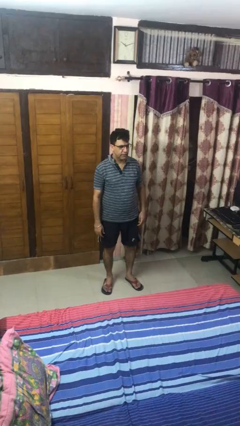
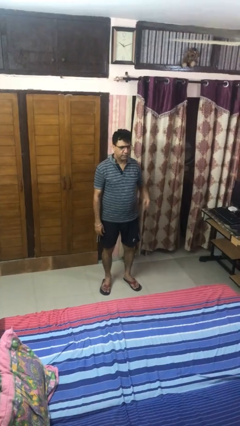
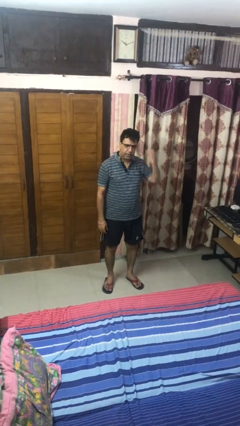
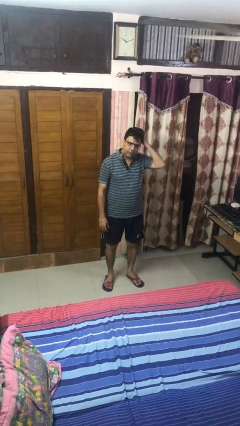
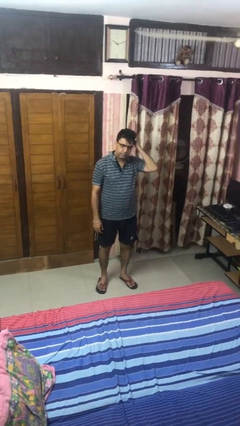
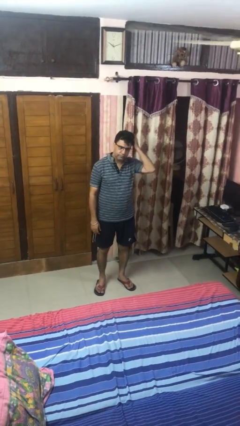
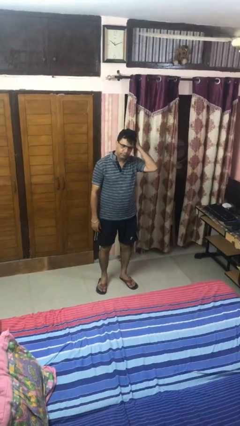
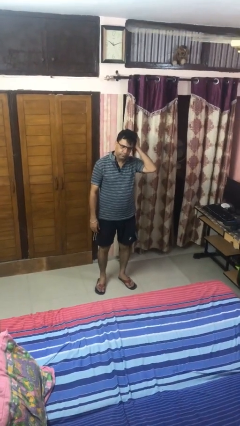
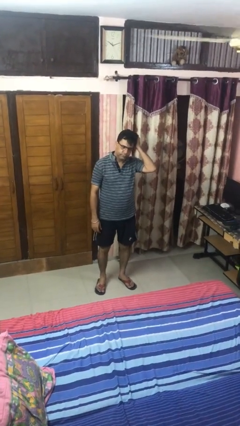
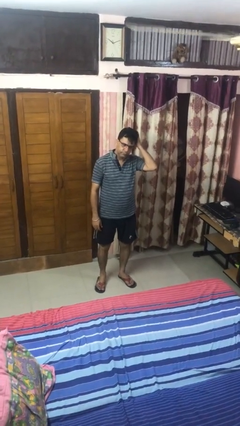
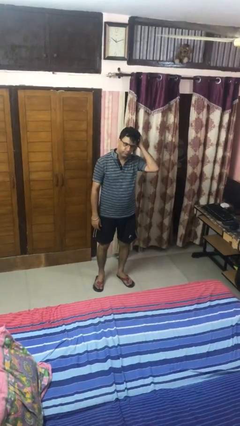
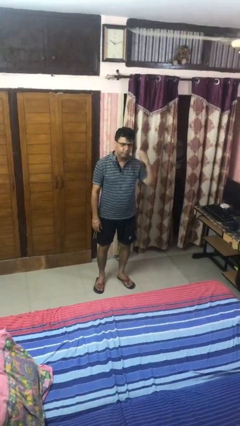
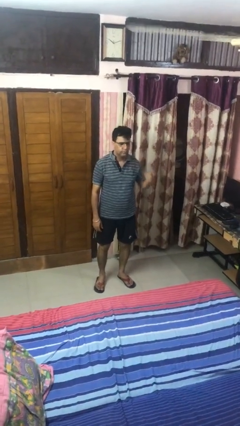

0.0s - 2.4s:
person scratches face

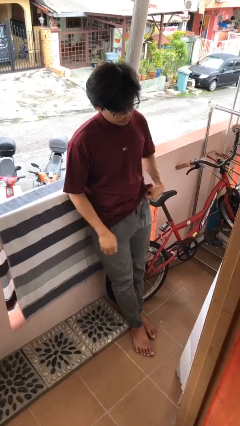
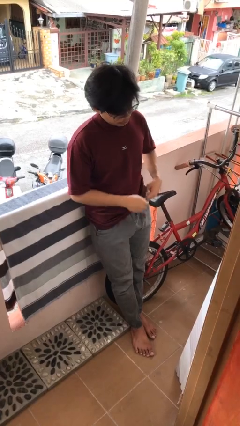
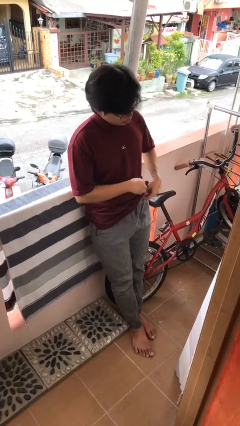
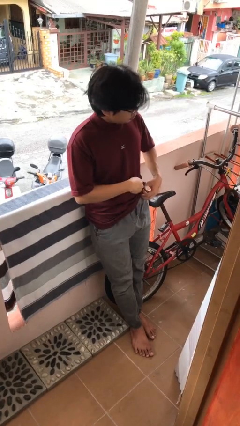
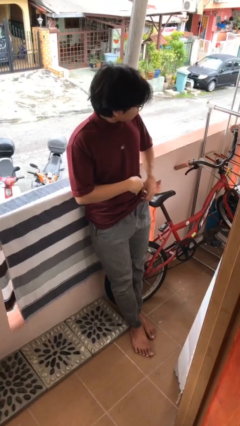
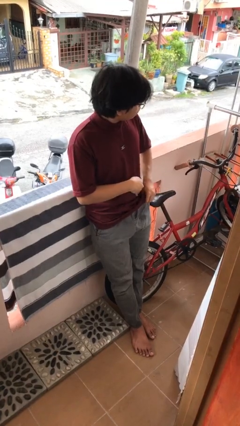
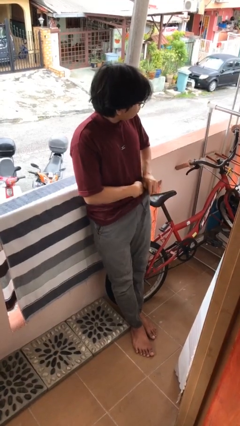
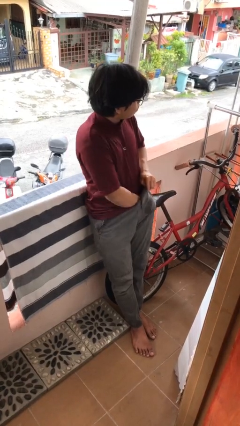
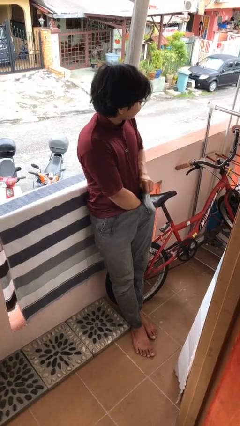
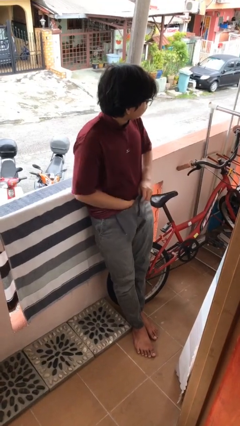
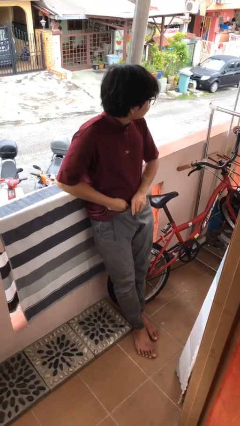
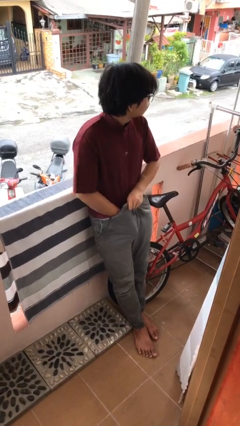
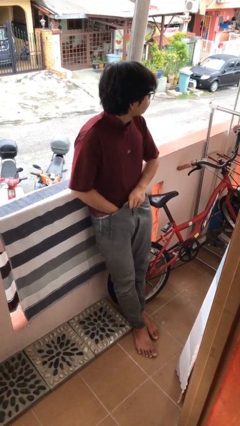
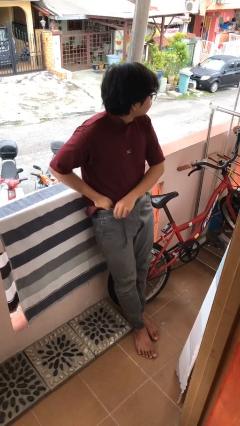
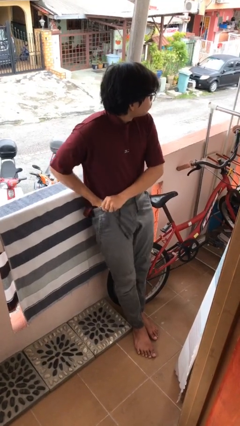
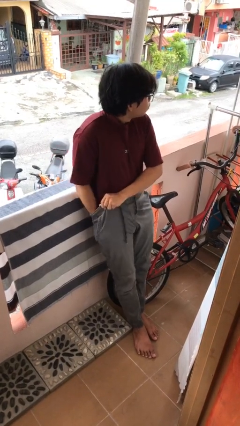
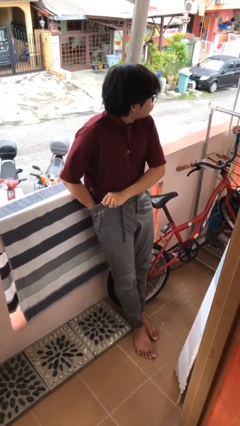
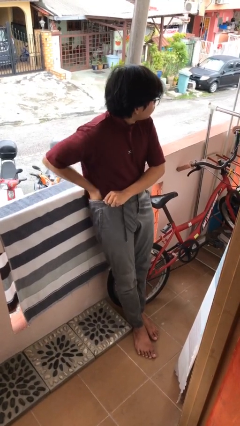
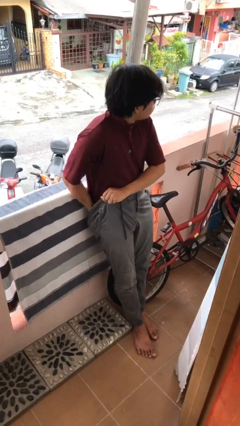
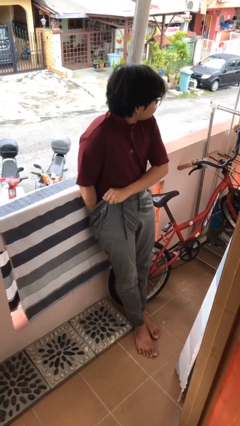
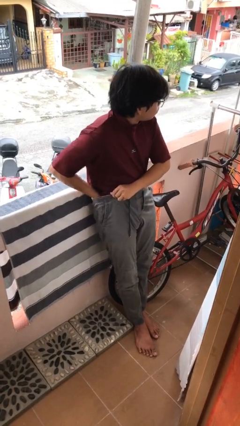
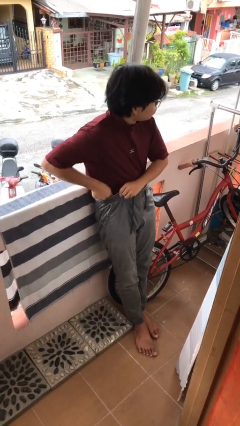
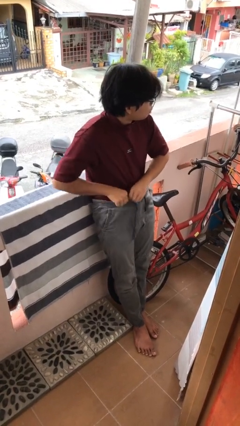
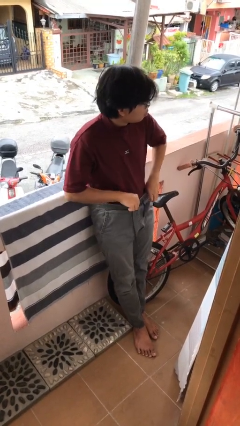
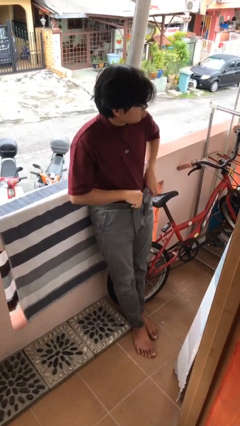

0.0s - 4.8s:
person tucks in shirt

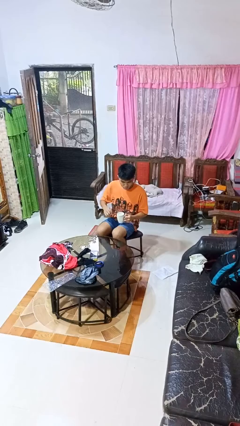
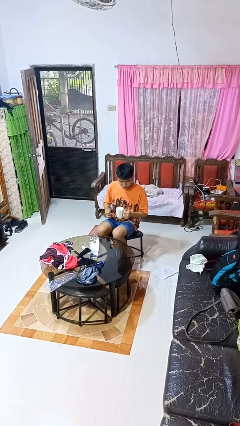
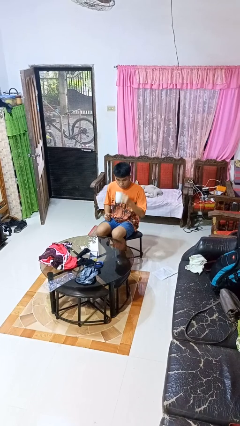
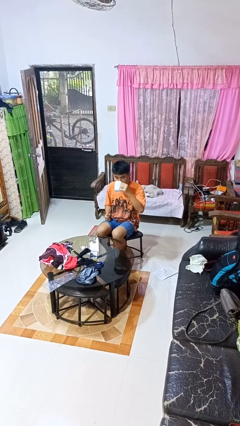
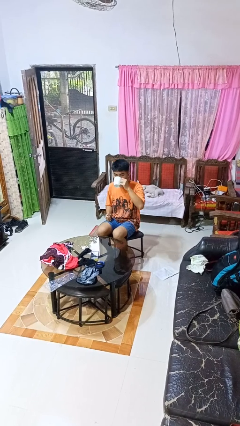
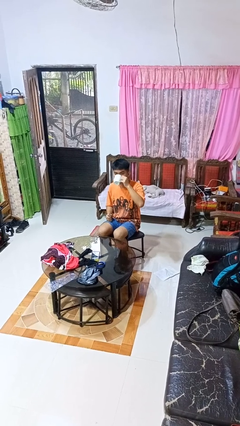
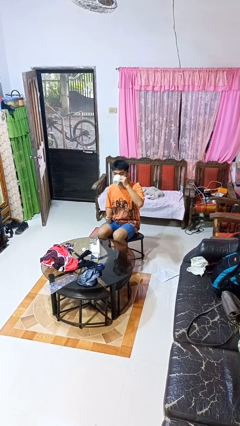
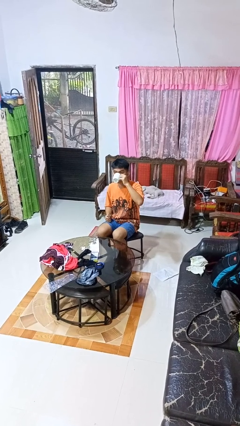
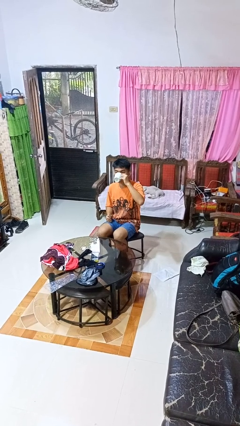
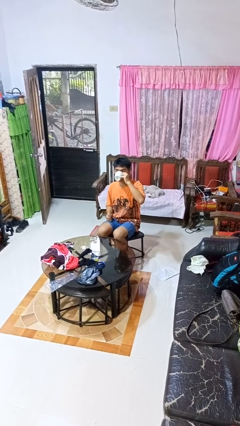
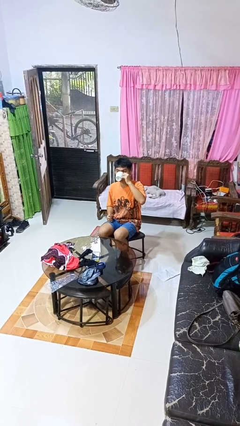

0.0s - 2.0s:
person drinks from mug

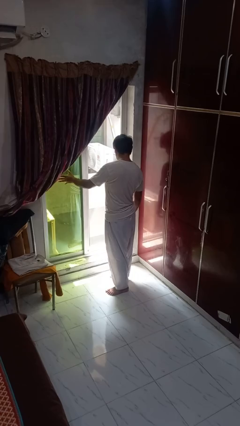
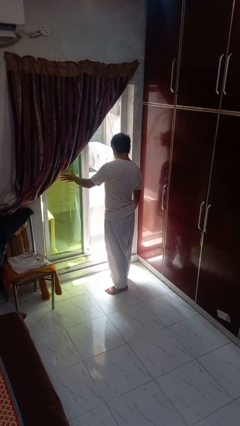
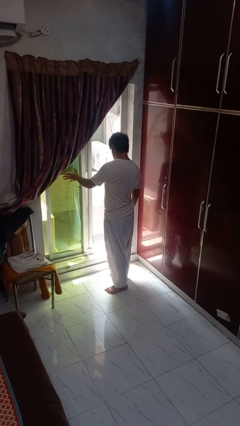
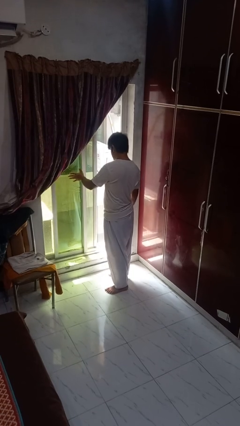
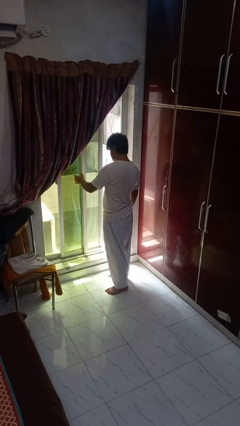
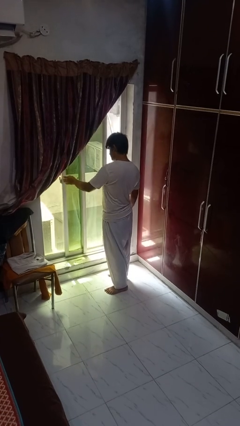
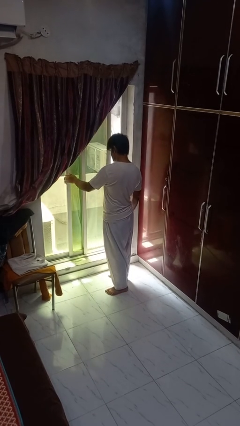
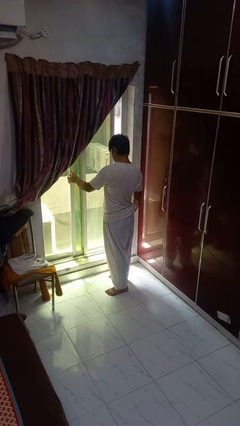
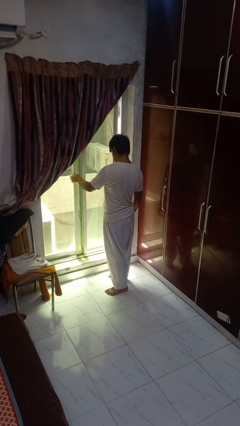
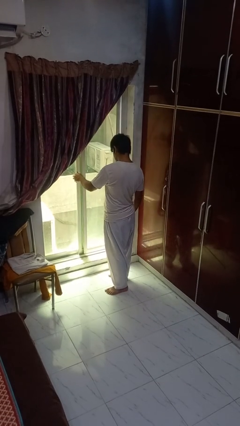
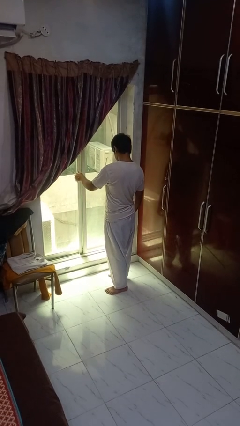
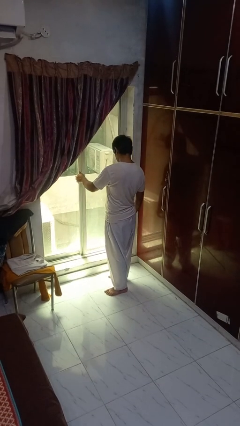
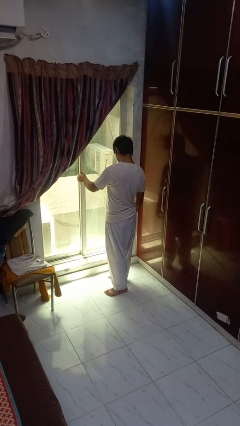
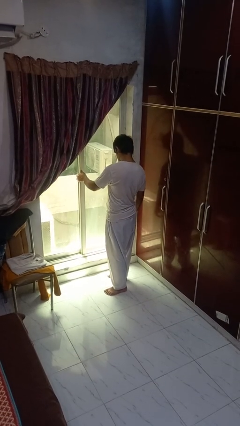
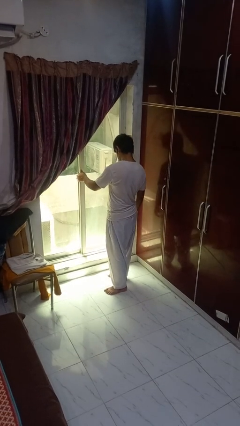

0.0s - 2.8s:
person closes home window

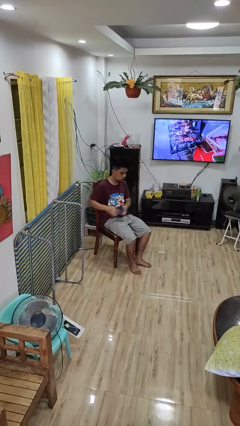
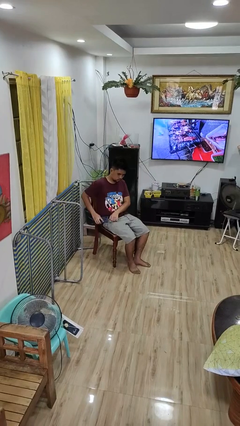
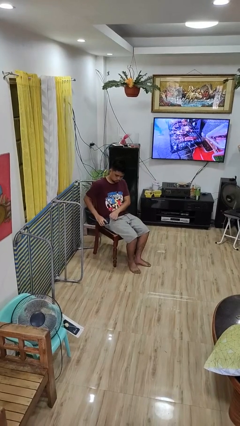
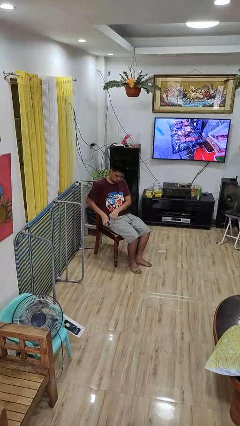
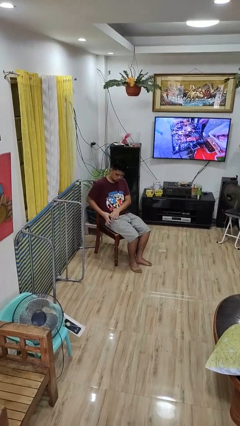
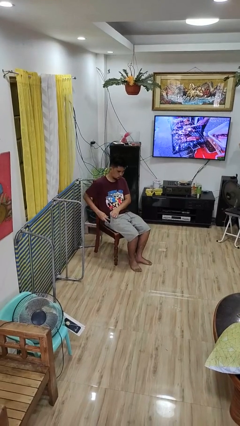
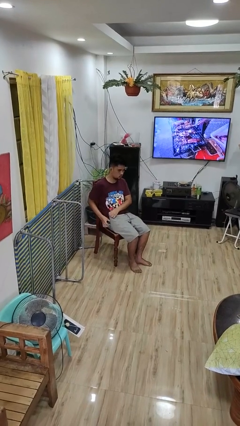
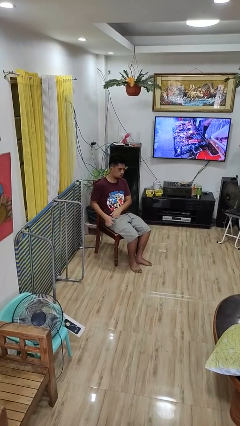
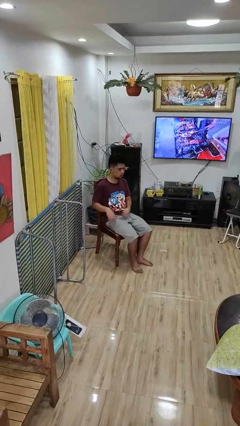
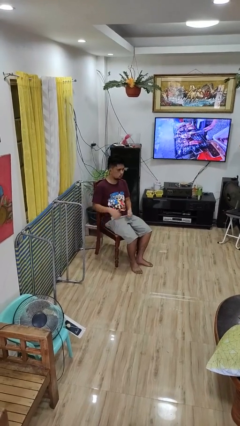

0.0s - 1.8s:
person puts phone into pocket

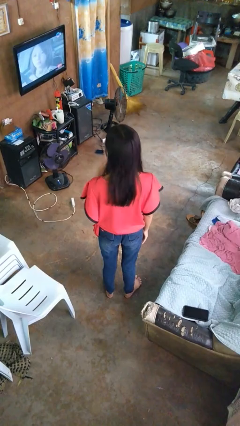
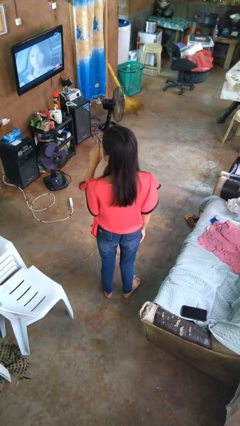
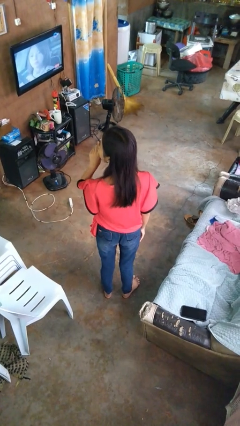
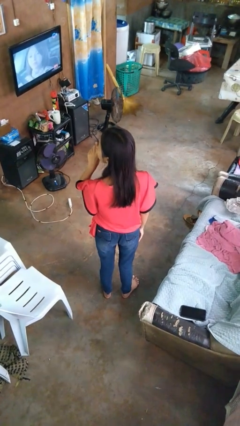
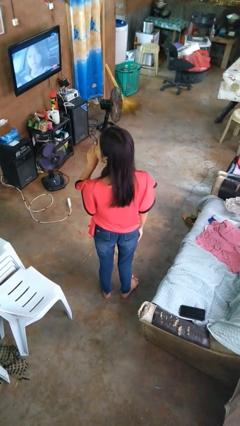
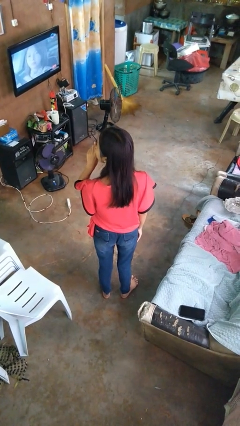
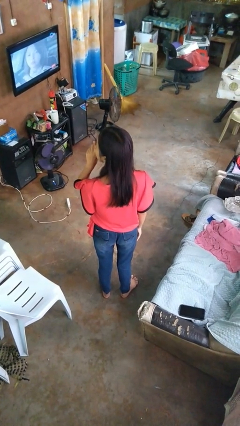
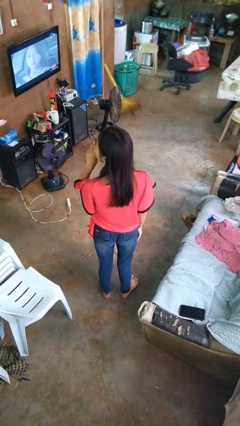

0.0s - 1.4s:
person gestures be quiet

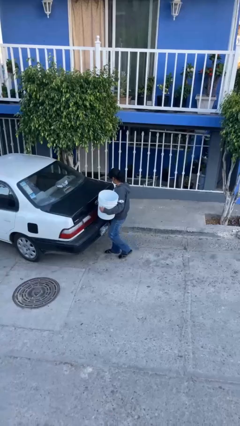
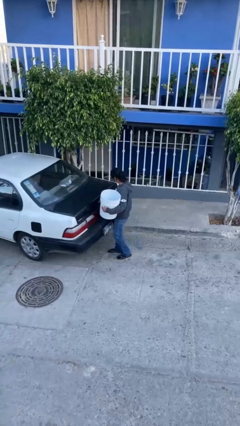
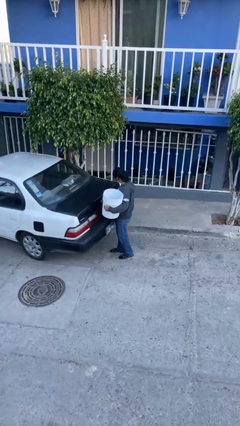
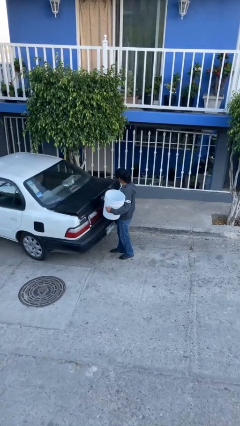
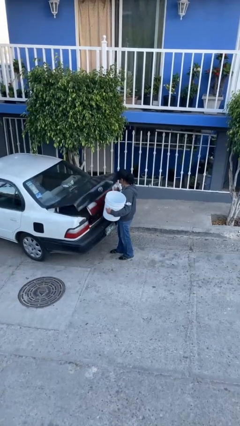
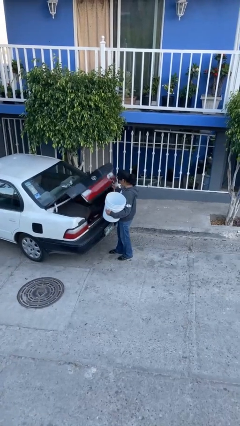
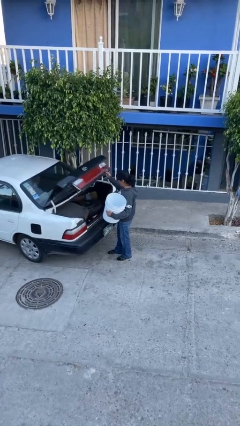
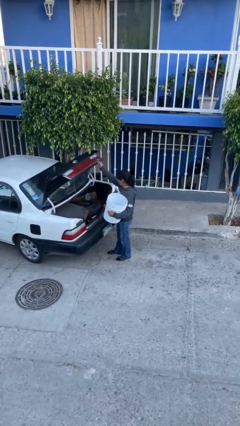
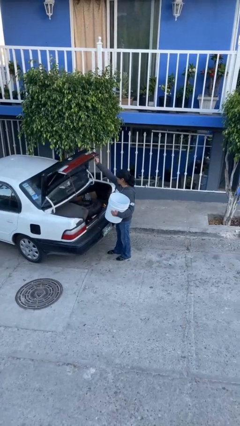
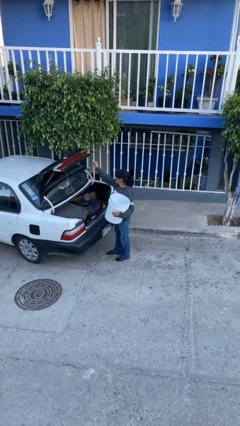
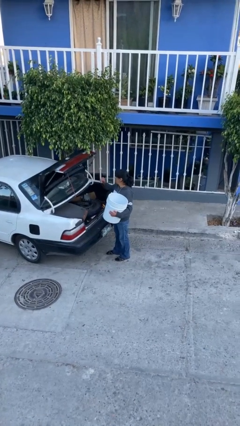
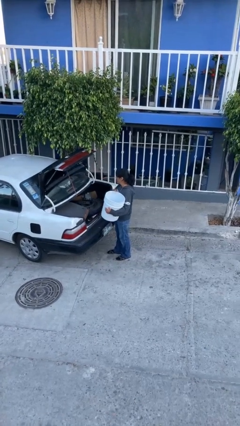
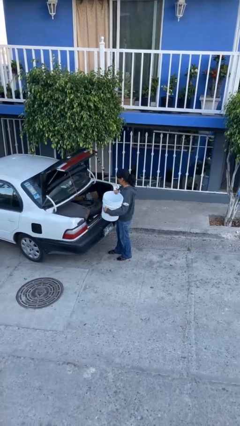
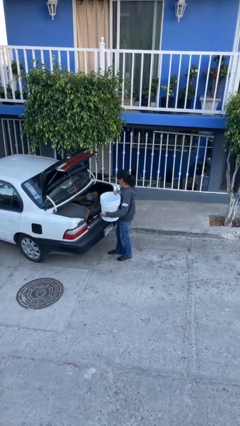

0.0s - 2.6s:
person opens car trunk
